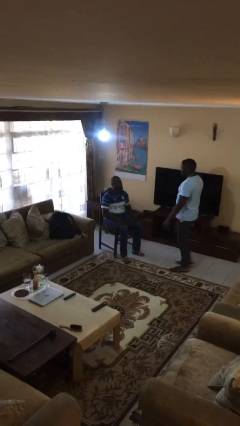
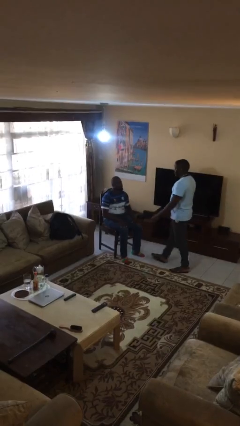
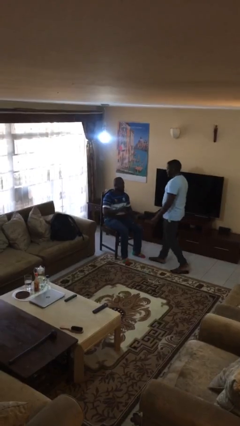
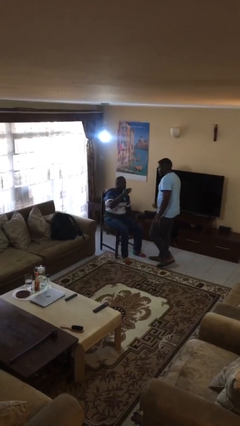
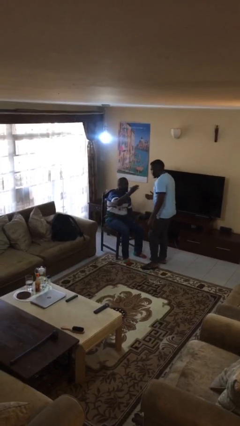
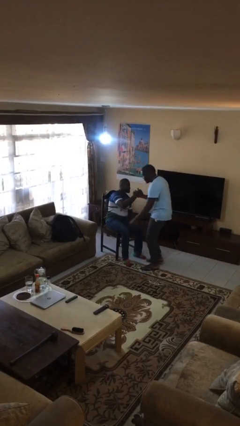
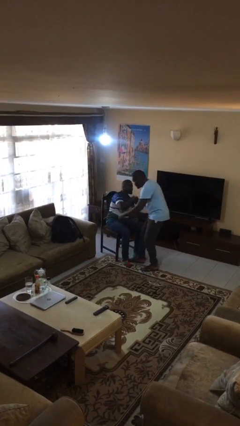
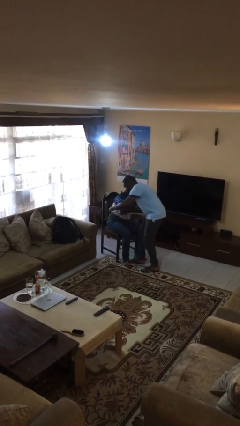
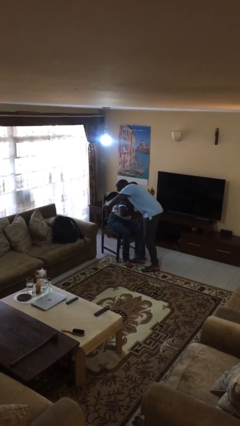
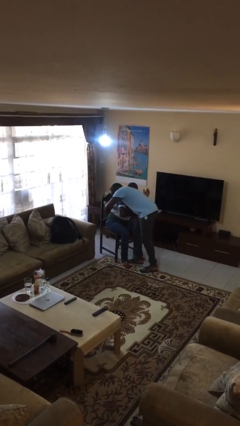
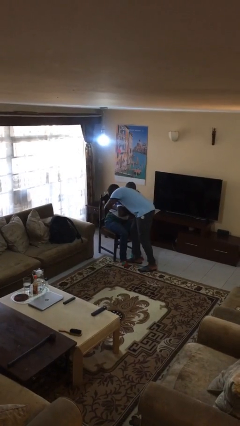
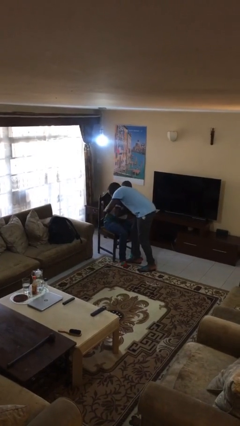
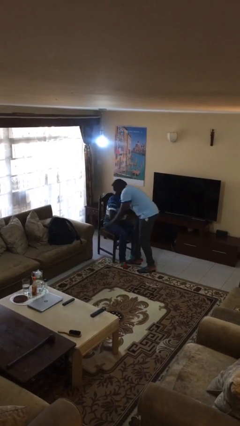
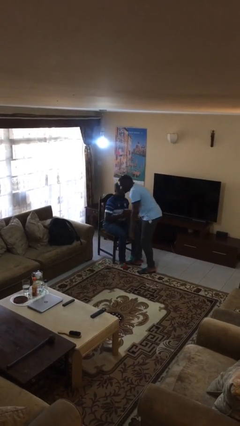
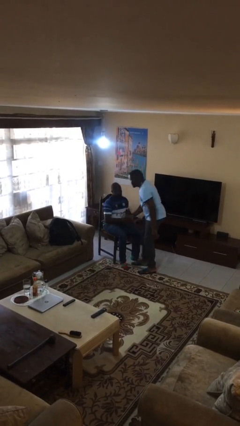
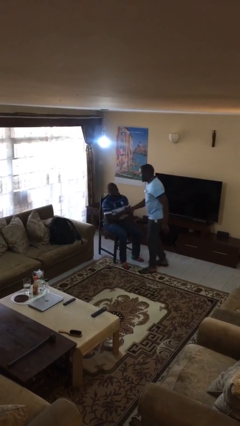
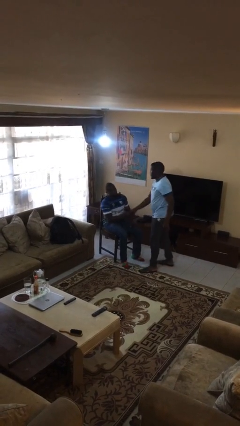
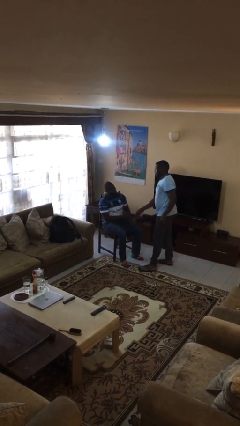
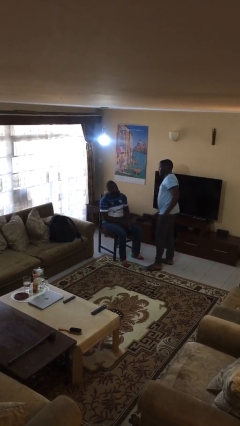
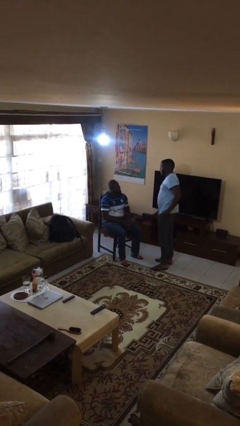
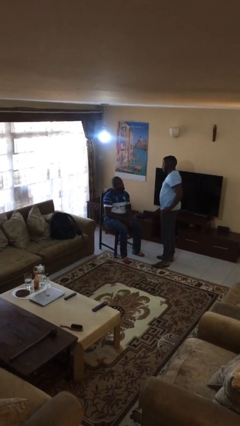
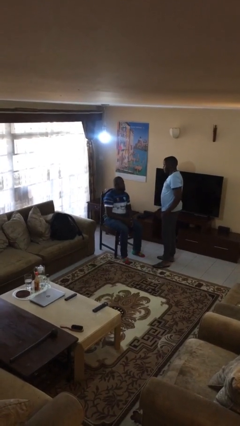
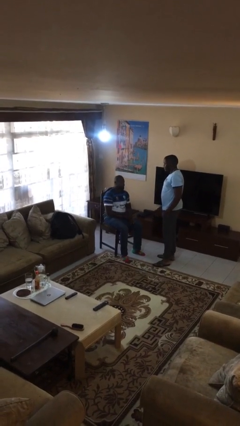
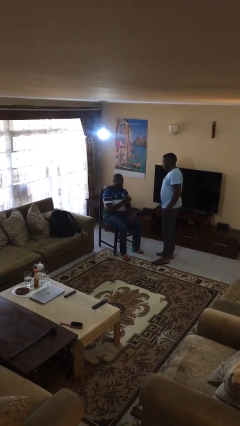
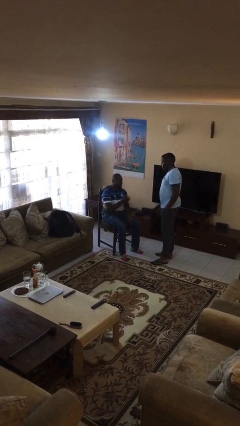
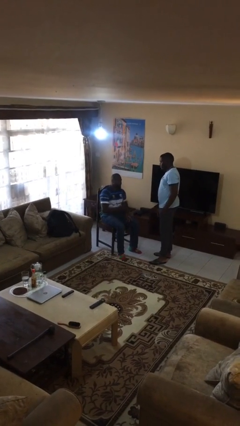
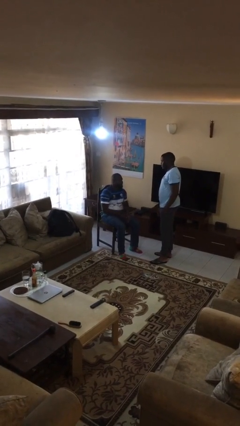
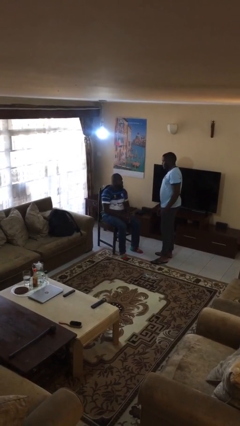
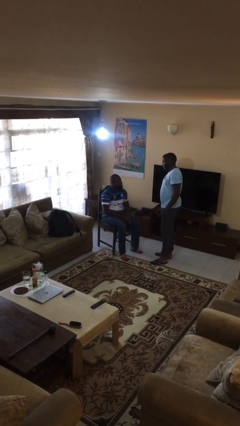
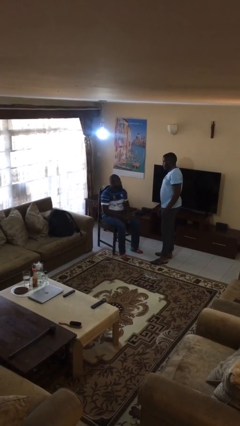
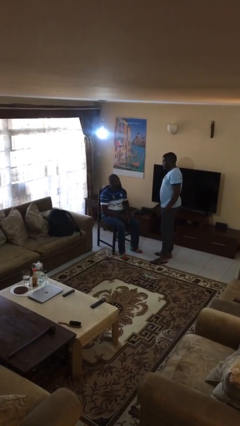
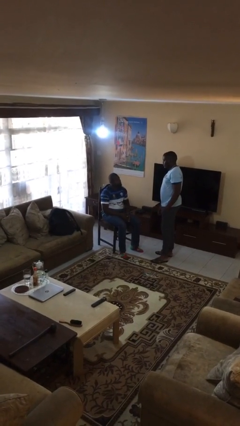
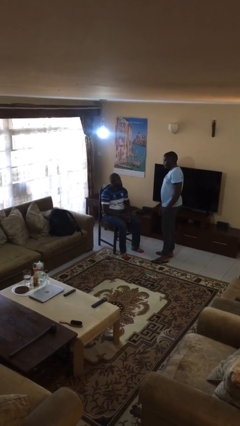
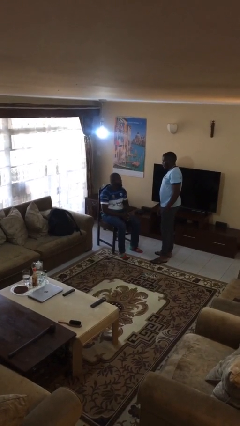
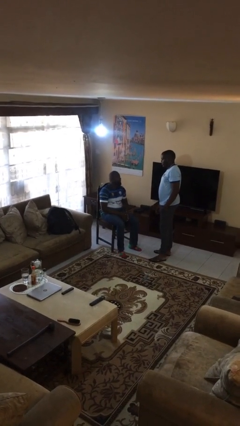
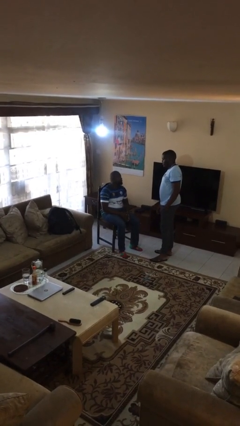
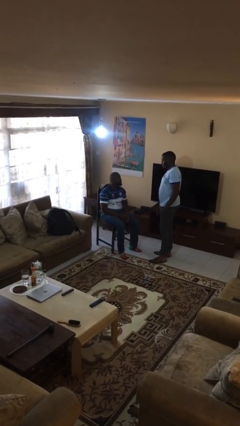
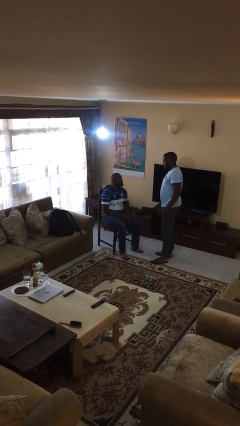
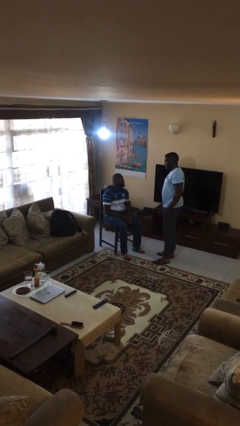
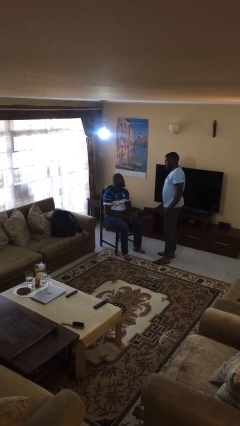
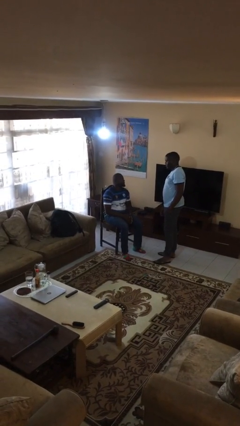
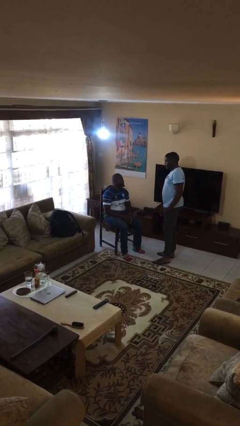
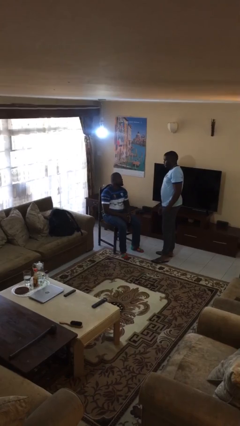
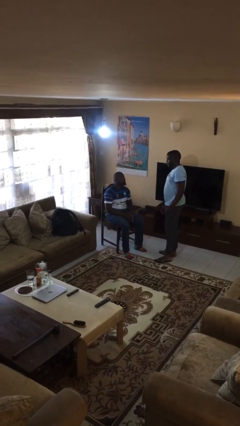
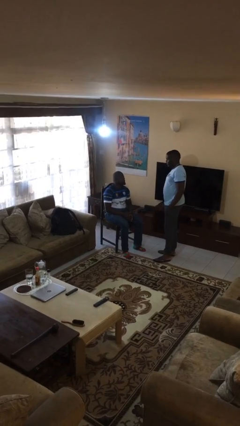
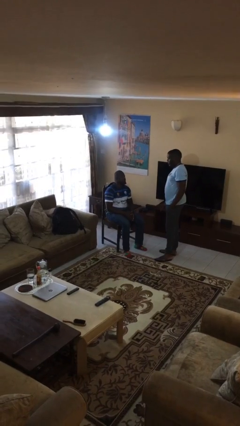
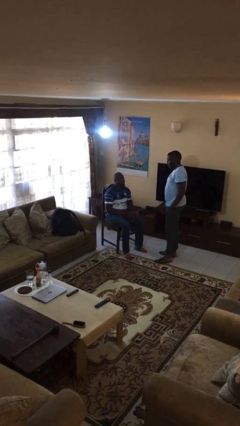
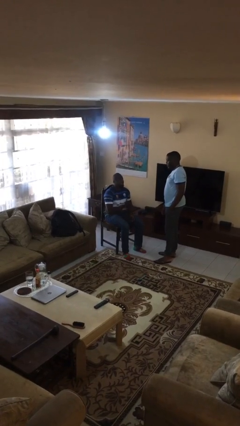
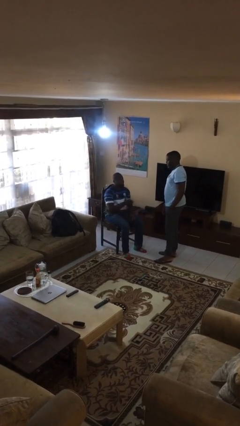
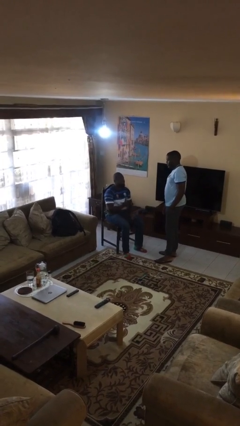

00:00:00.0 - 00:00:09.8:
person embraces person

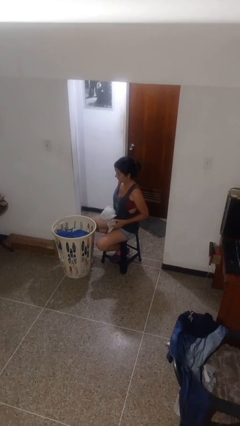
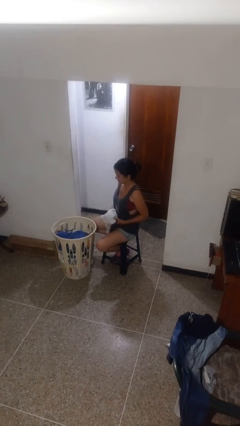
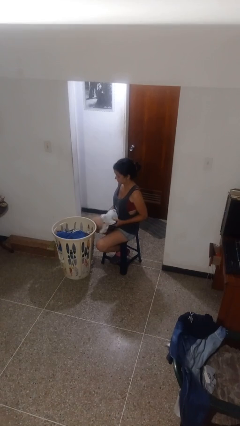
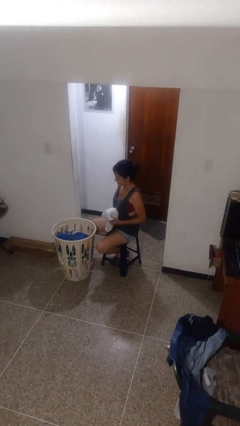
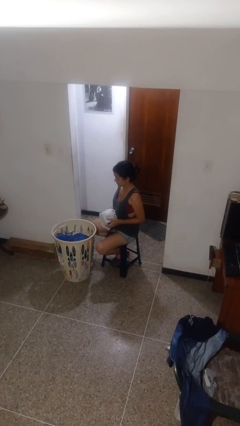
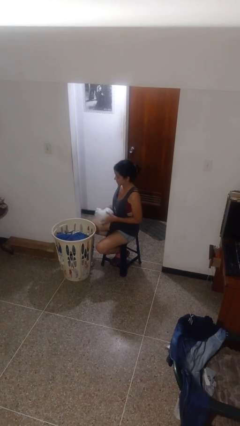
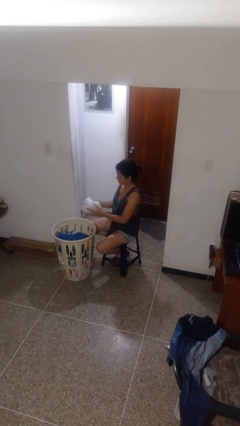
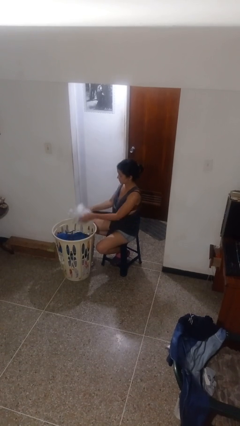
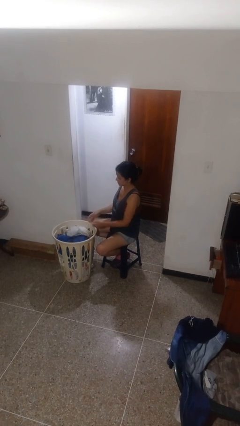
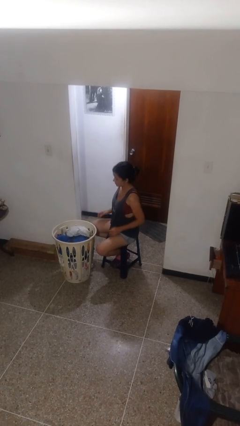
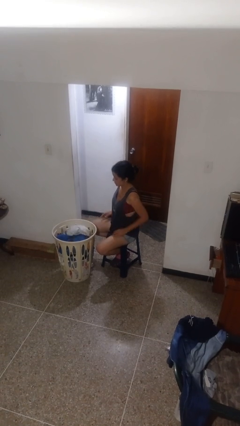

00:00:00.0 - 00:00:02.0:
person puts object into basket

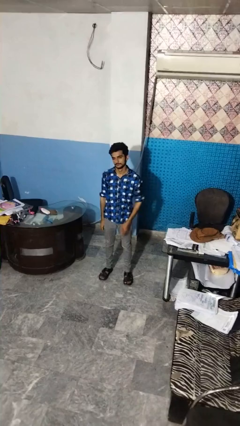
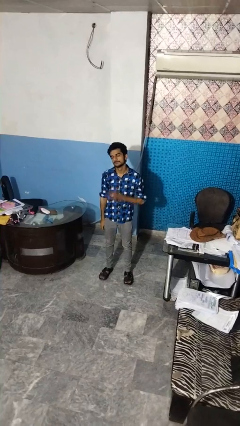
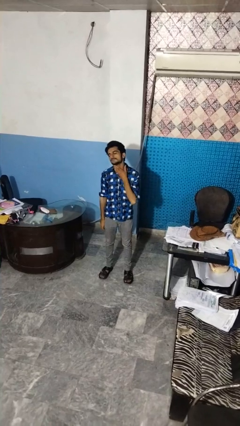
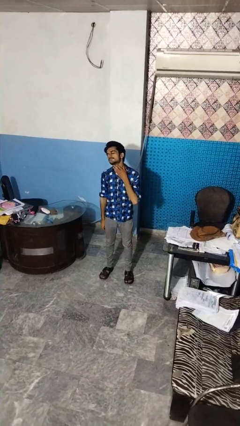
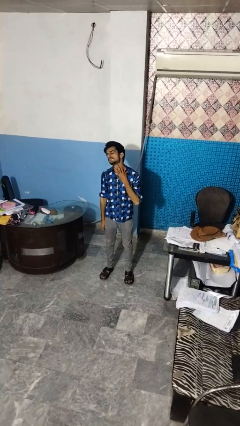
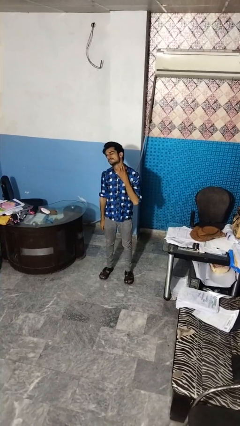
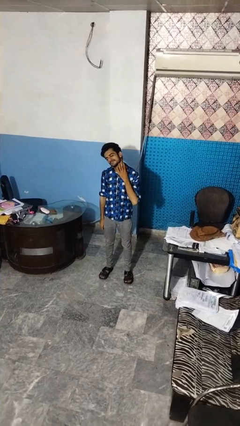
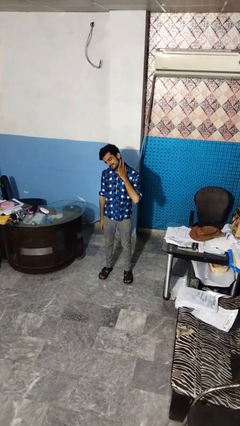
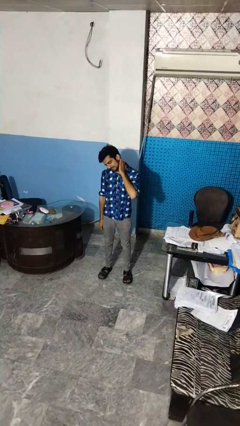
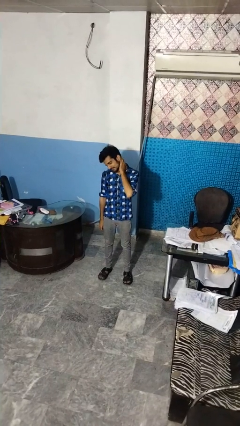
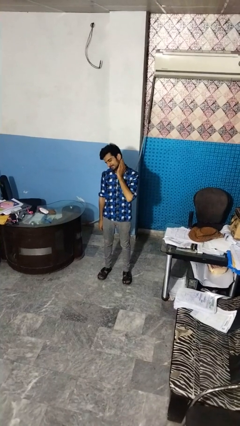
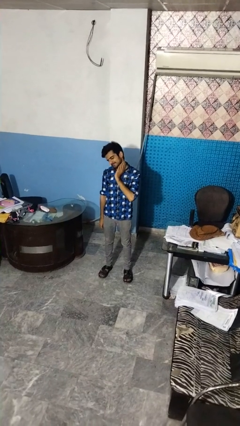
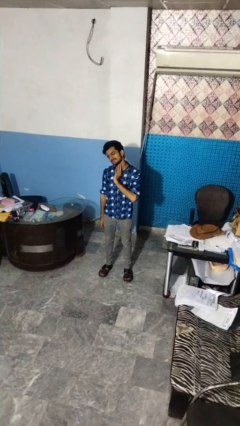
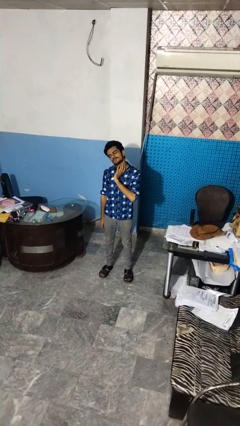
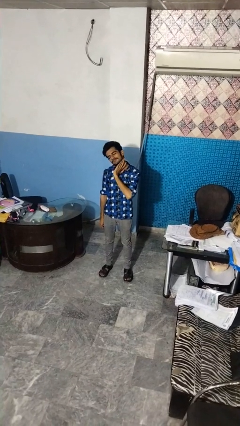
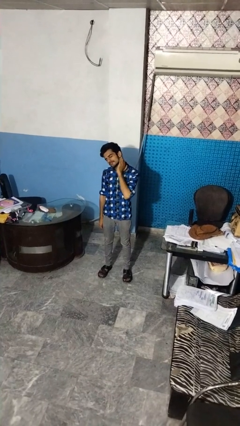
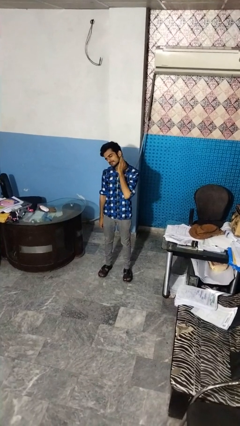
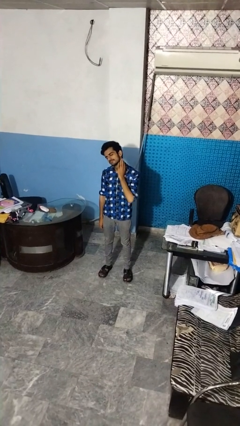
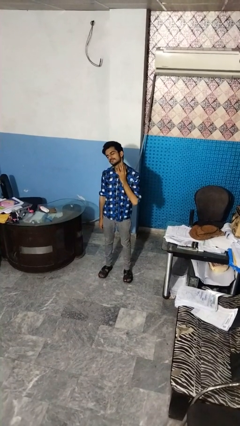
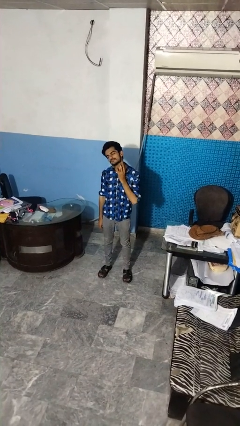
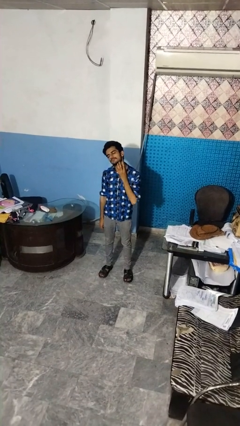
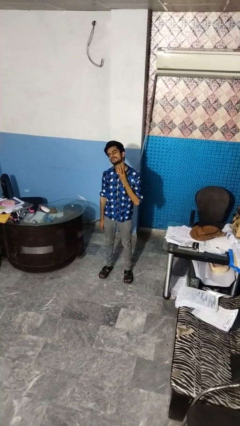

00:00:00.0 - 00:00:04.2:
person rubs neck

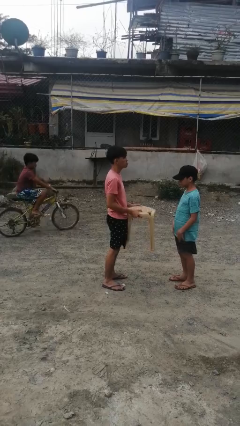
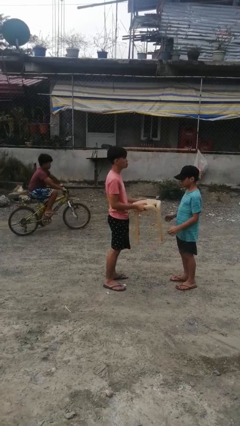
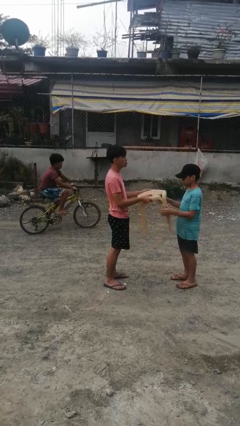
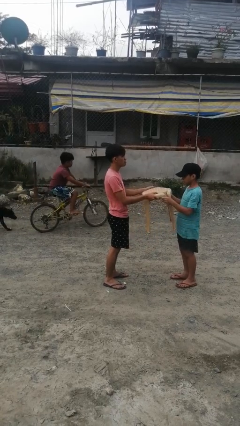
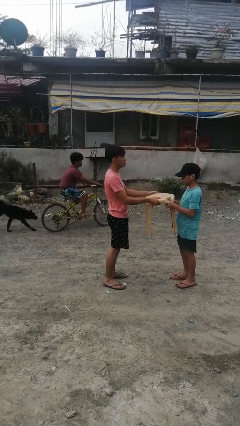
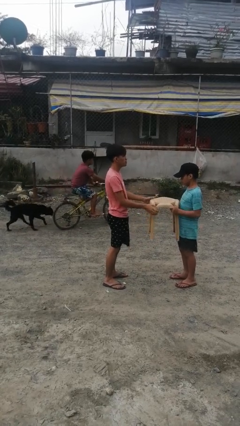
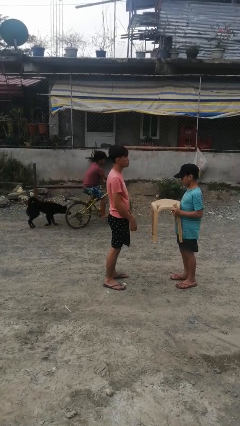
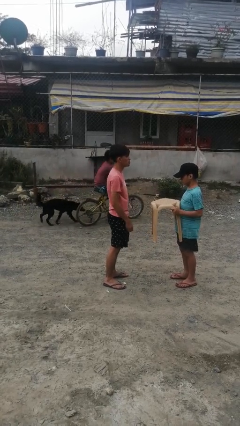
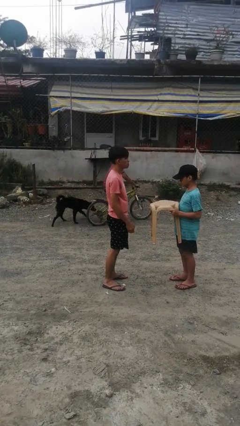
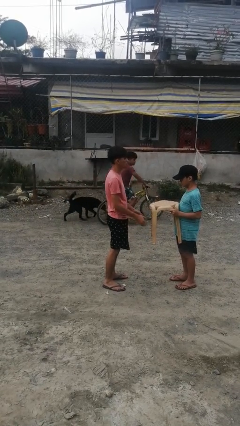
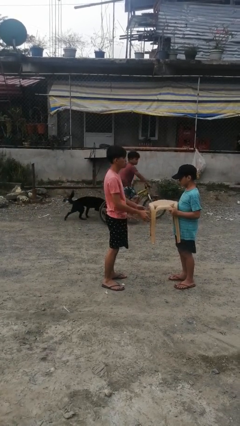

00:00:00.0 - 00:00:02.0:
person transfers object to person

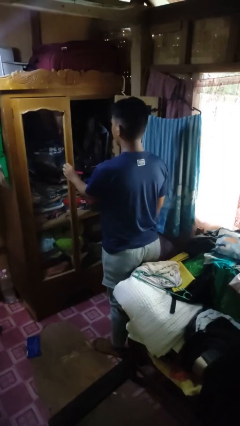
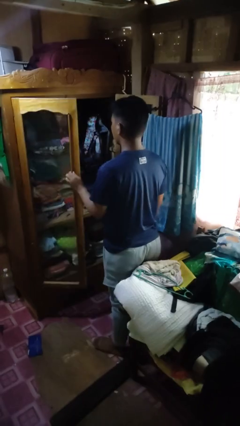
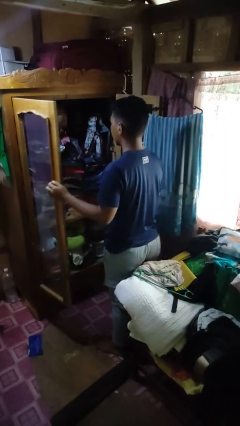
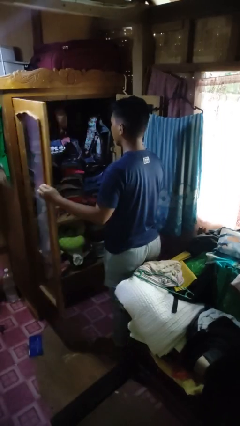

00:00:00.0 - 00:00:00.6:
person opens closet door
